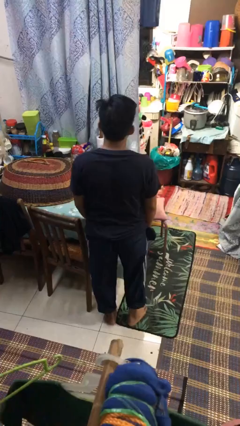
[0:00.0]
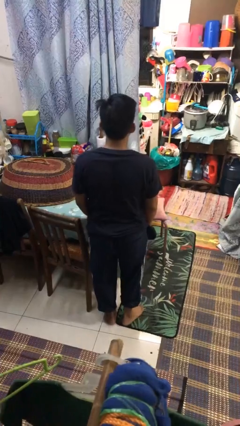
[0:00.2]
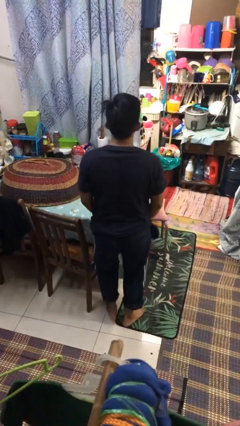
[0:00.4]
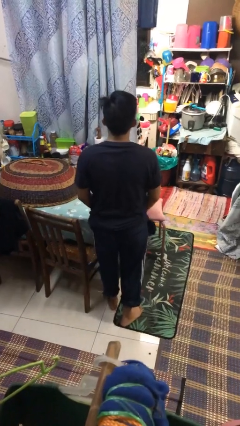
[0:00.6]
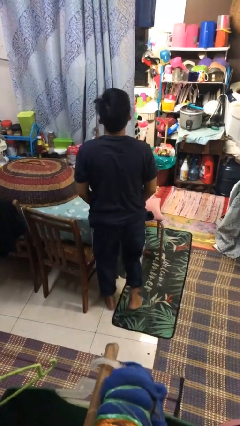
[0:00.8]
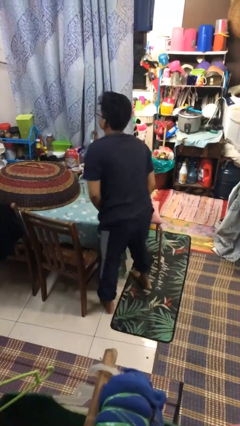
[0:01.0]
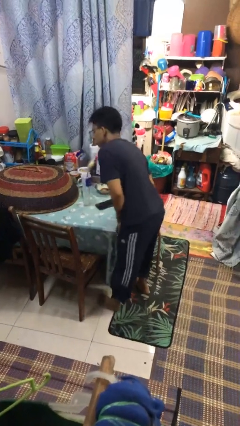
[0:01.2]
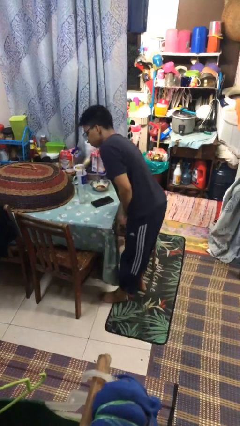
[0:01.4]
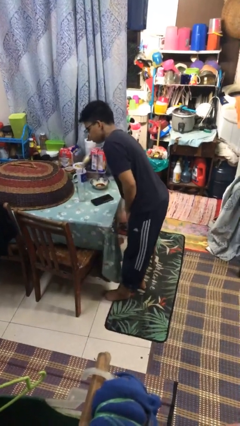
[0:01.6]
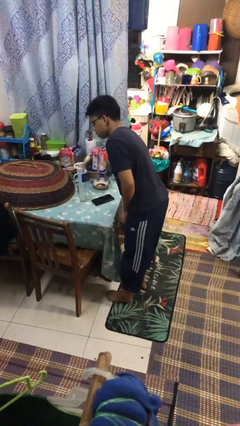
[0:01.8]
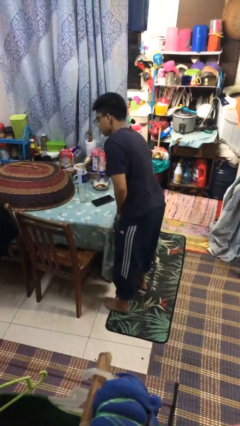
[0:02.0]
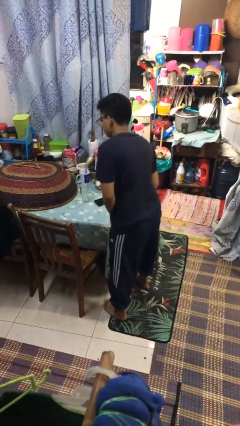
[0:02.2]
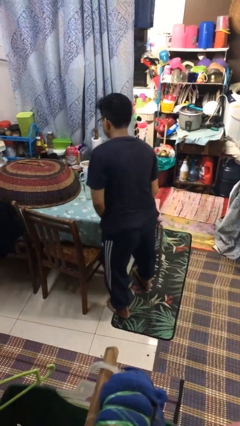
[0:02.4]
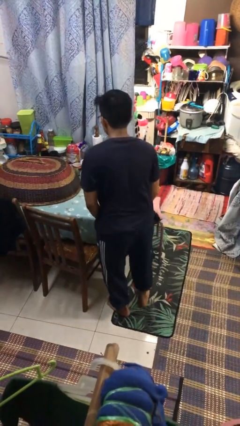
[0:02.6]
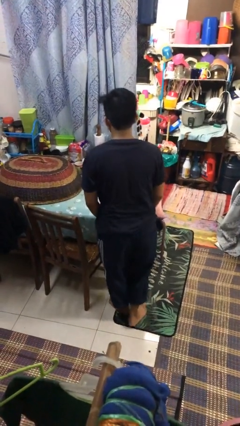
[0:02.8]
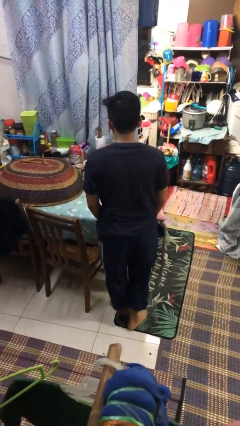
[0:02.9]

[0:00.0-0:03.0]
person bumps into table

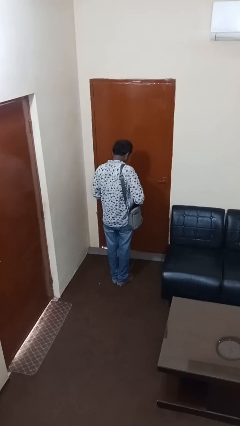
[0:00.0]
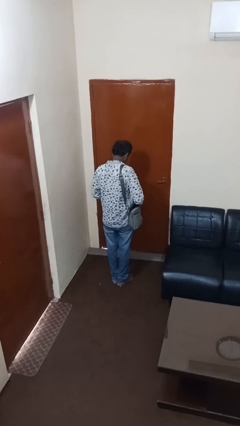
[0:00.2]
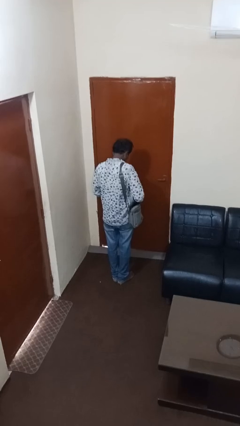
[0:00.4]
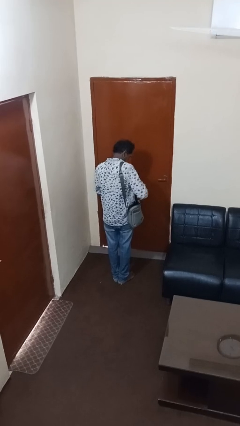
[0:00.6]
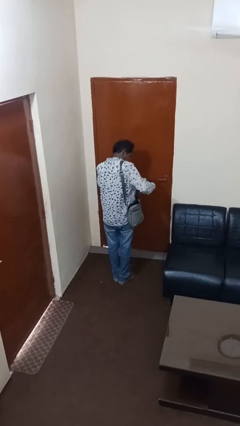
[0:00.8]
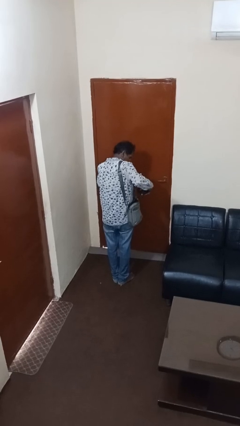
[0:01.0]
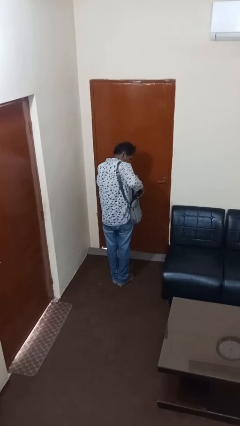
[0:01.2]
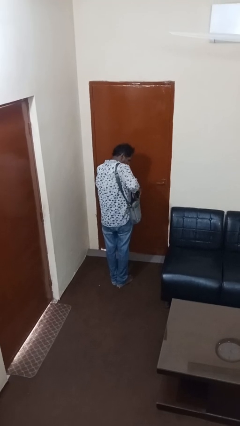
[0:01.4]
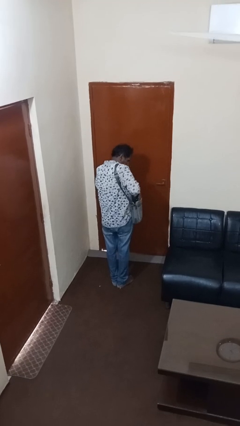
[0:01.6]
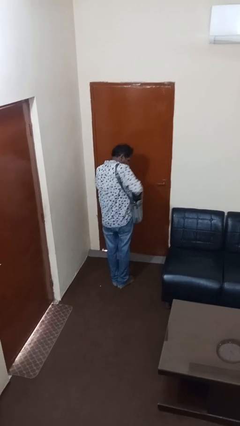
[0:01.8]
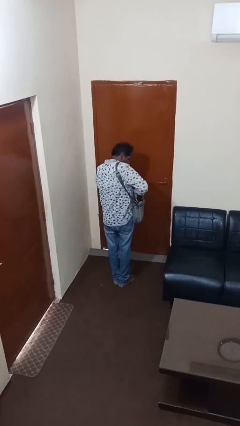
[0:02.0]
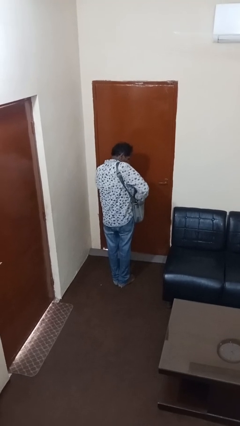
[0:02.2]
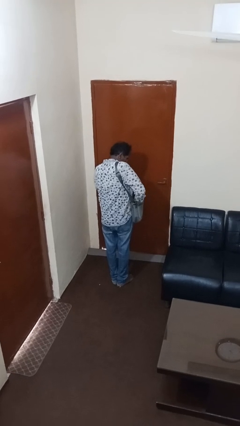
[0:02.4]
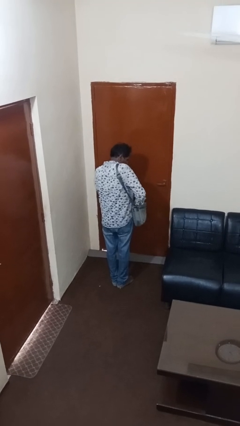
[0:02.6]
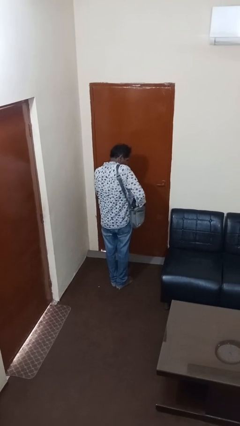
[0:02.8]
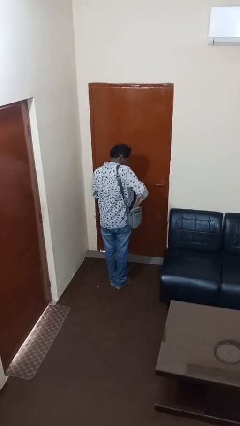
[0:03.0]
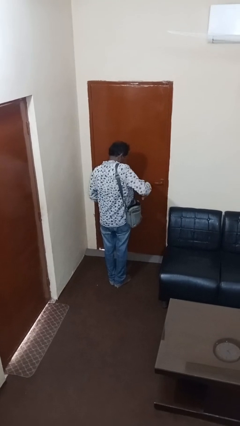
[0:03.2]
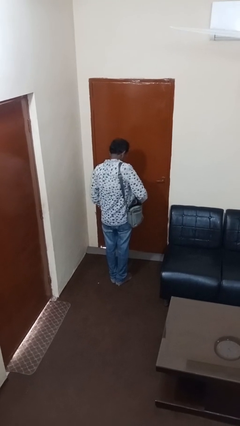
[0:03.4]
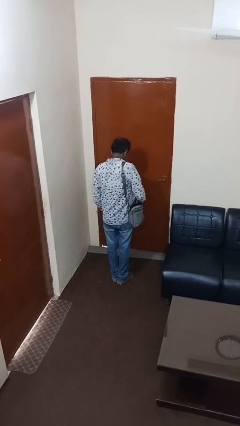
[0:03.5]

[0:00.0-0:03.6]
person puts object into purse

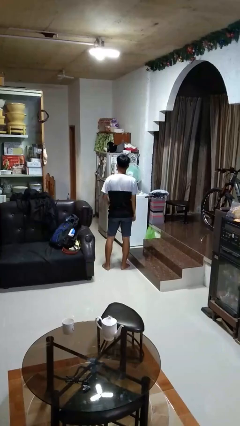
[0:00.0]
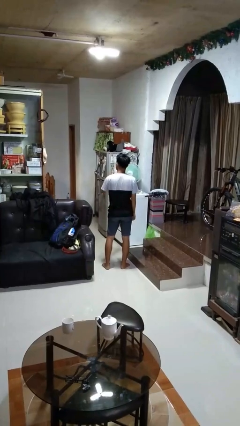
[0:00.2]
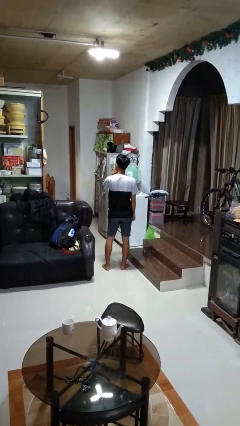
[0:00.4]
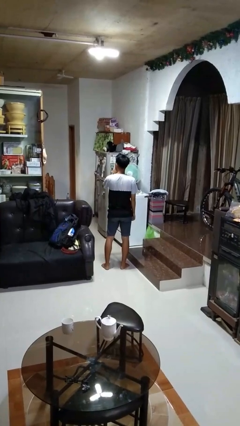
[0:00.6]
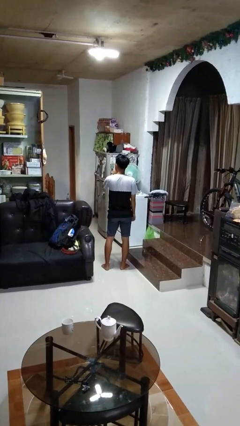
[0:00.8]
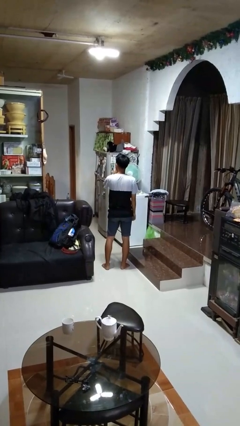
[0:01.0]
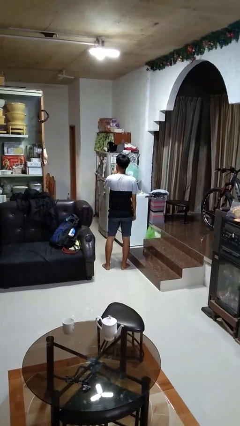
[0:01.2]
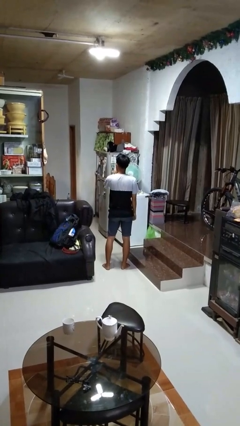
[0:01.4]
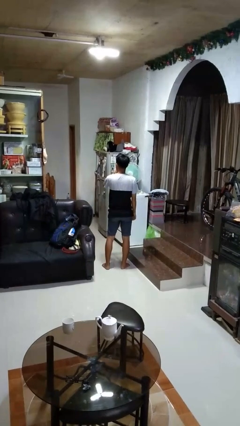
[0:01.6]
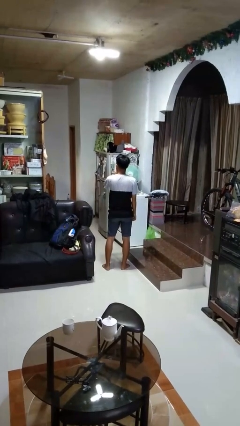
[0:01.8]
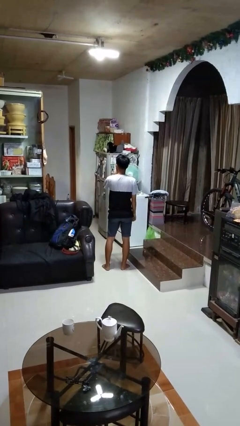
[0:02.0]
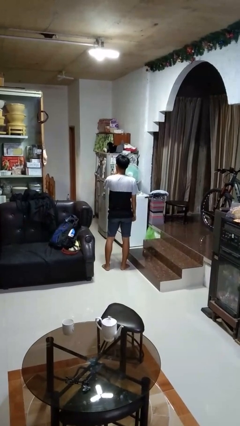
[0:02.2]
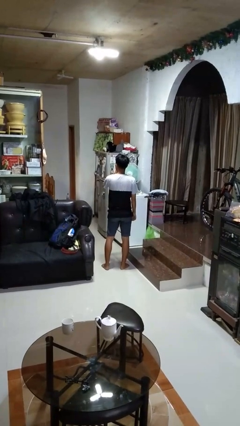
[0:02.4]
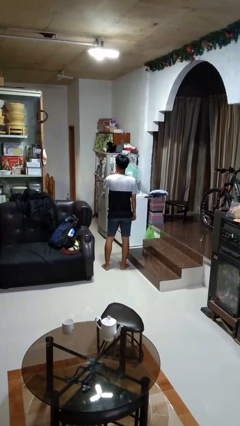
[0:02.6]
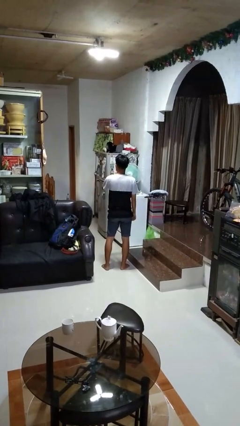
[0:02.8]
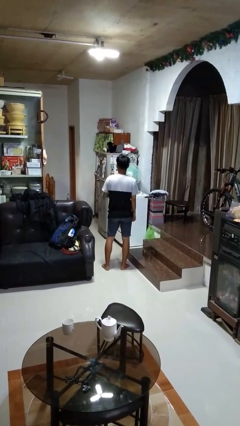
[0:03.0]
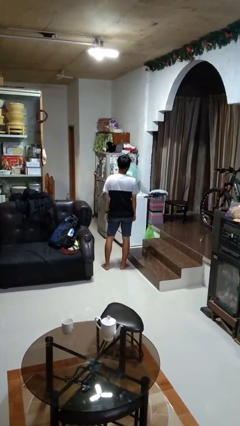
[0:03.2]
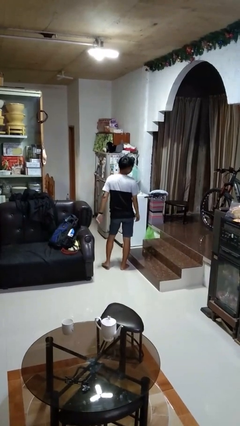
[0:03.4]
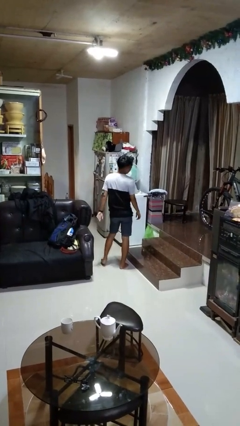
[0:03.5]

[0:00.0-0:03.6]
person gestures be quiet

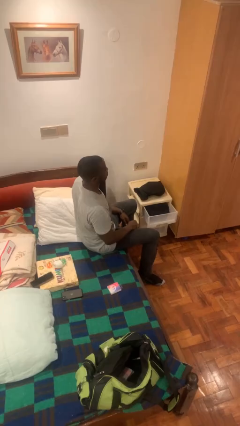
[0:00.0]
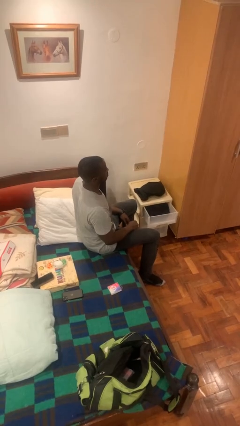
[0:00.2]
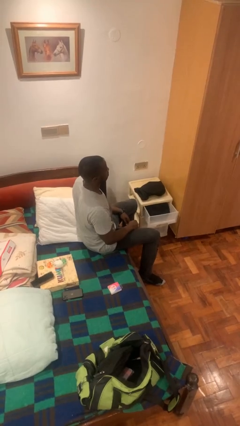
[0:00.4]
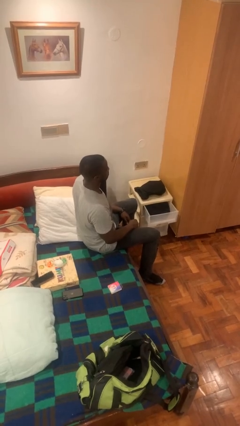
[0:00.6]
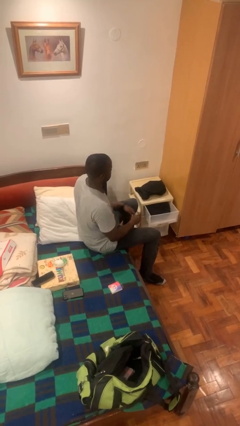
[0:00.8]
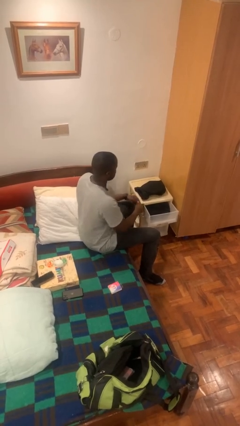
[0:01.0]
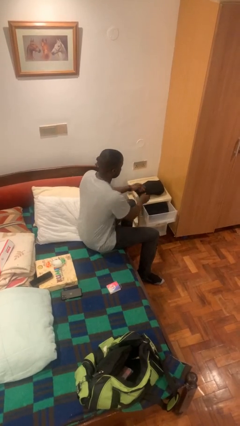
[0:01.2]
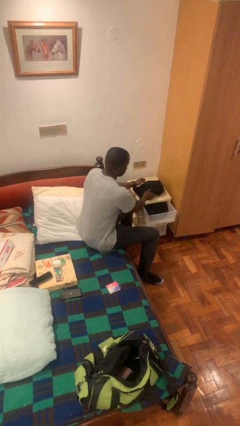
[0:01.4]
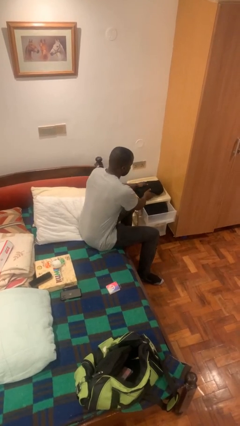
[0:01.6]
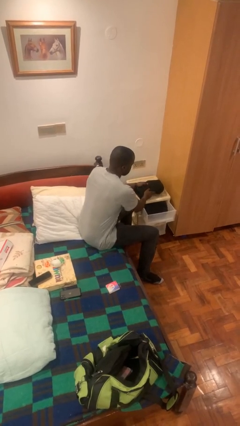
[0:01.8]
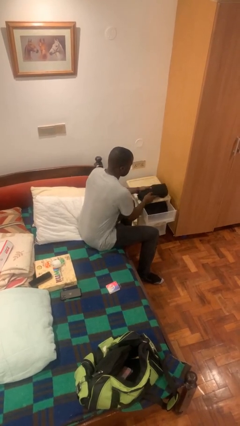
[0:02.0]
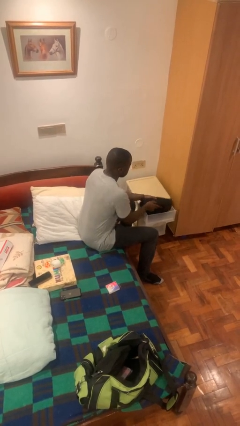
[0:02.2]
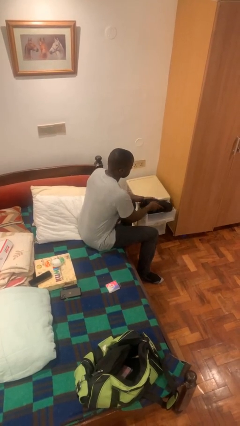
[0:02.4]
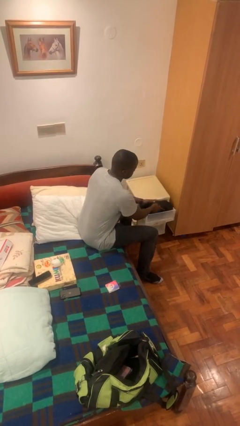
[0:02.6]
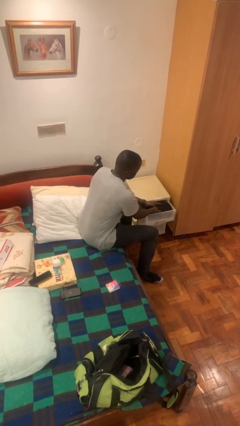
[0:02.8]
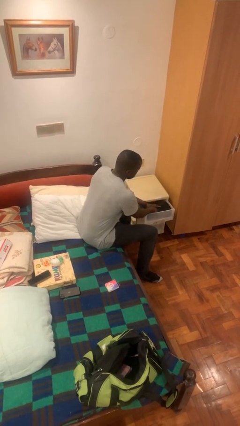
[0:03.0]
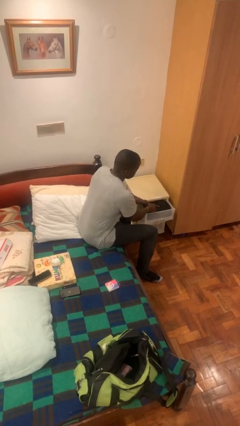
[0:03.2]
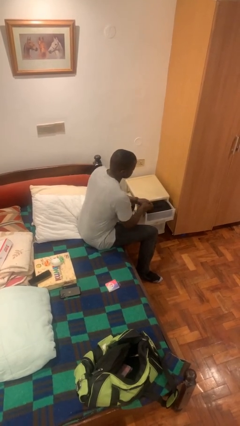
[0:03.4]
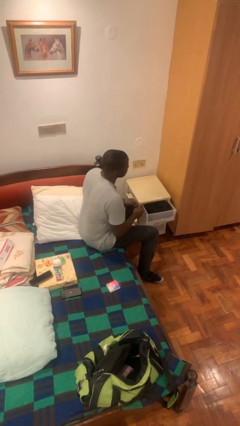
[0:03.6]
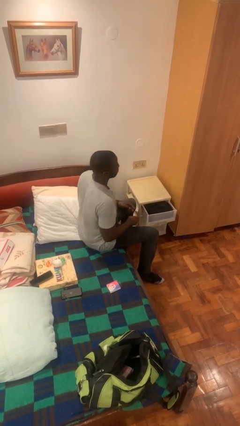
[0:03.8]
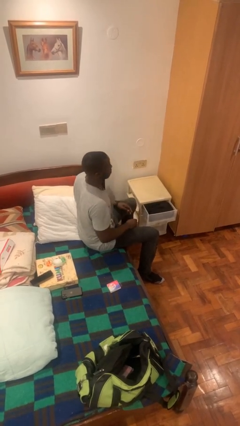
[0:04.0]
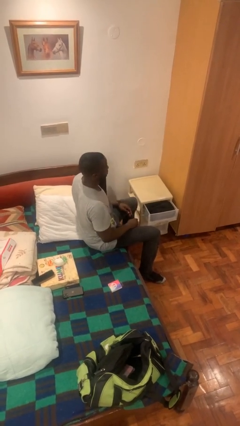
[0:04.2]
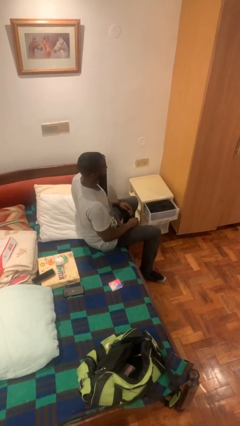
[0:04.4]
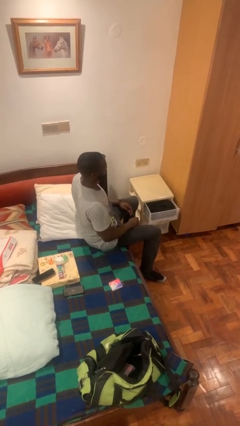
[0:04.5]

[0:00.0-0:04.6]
person puts clothes into dresser

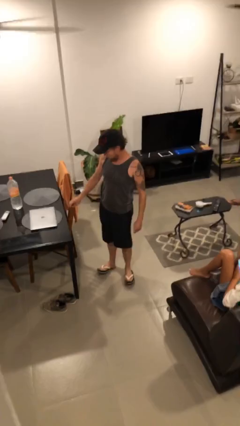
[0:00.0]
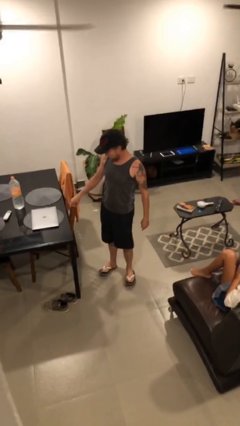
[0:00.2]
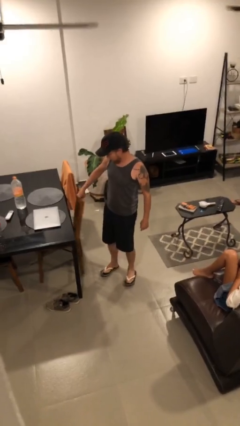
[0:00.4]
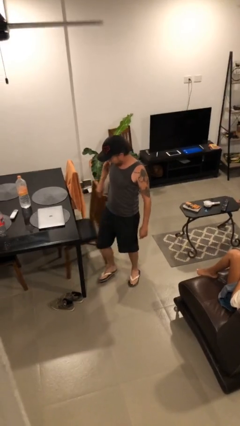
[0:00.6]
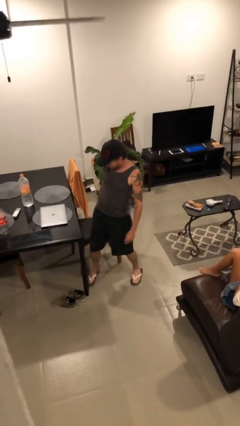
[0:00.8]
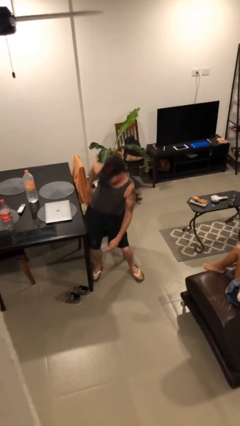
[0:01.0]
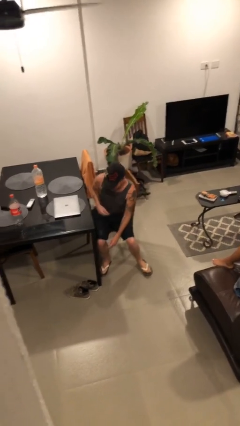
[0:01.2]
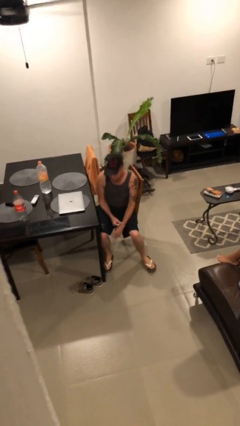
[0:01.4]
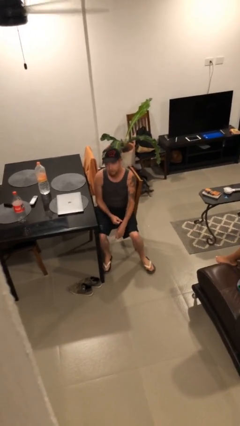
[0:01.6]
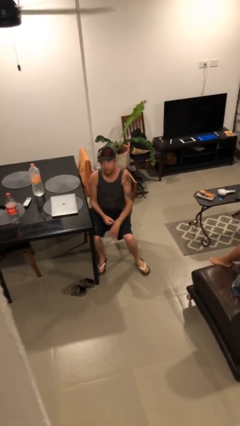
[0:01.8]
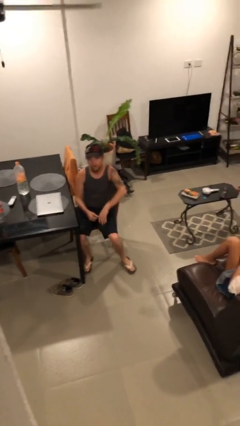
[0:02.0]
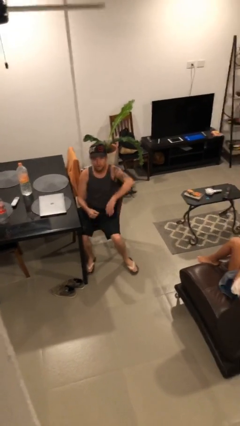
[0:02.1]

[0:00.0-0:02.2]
person sits down
